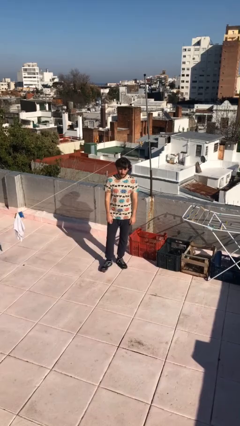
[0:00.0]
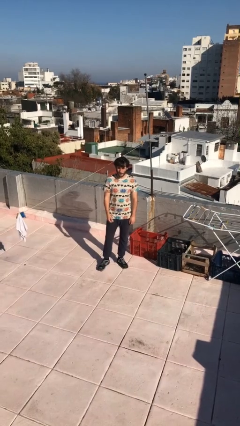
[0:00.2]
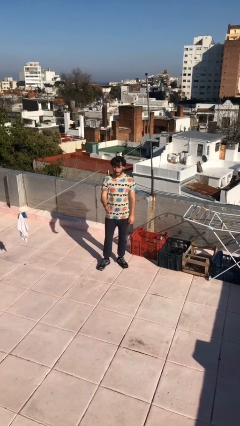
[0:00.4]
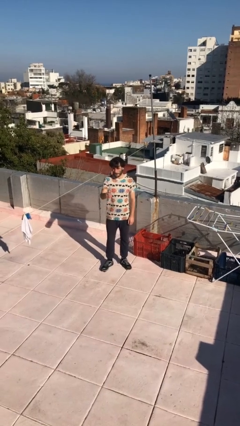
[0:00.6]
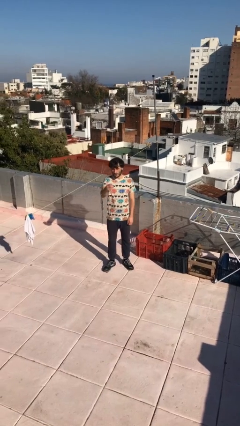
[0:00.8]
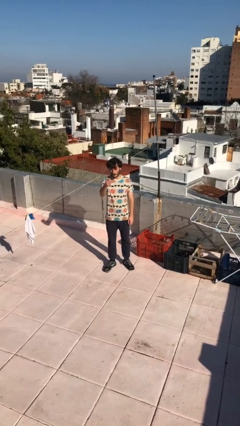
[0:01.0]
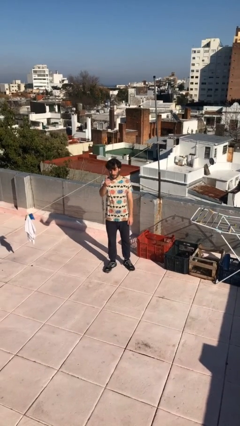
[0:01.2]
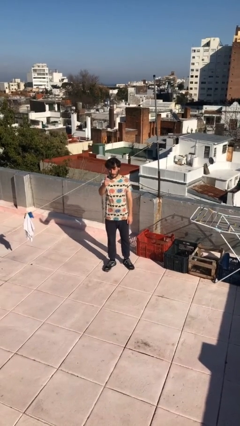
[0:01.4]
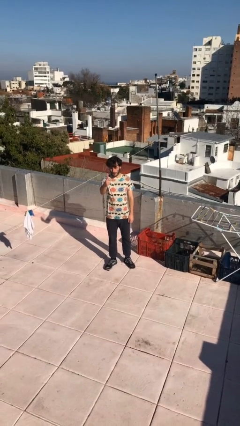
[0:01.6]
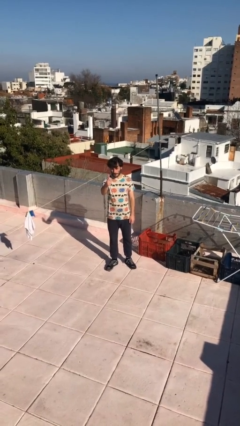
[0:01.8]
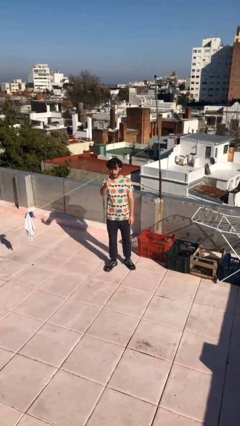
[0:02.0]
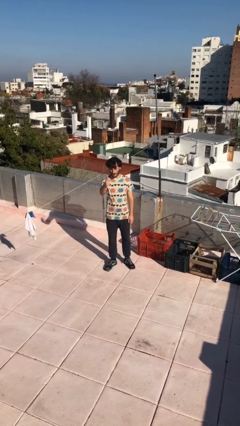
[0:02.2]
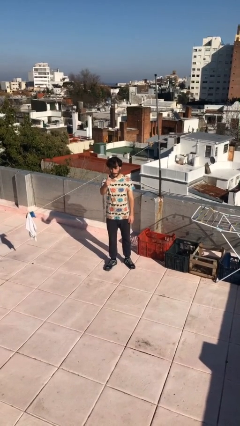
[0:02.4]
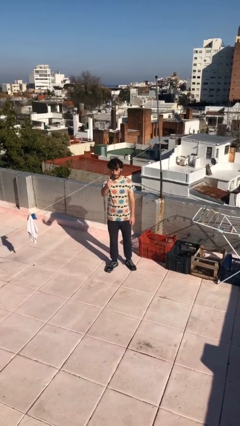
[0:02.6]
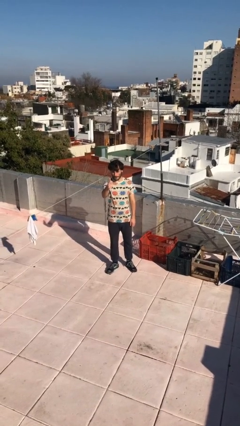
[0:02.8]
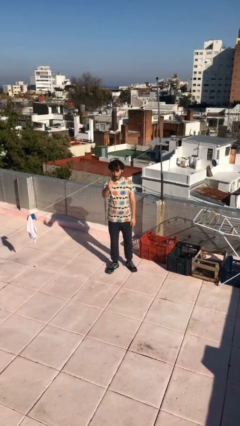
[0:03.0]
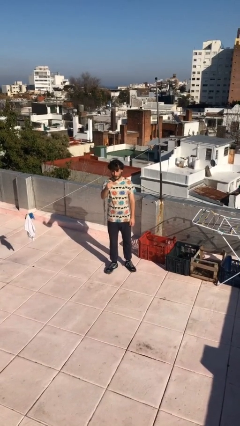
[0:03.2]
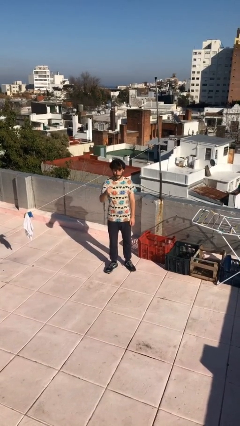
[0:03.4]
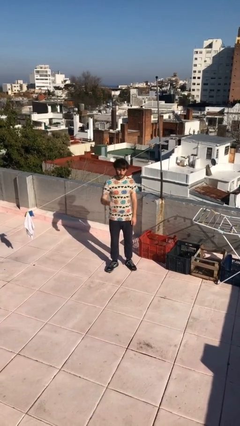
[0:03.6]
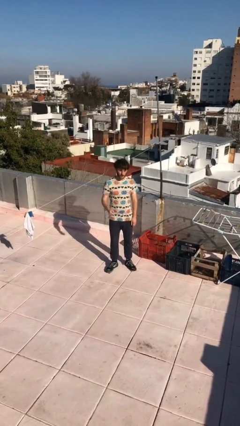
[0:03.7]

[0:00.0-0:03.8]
person gestures thumbs up

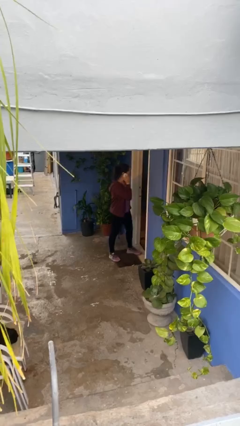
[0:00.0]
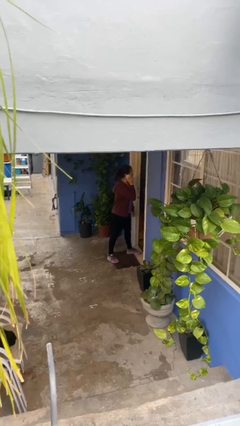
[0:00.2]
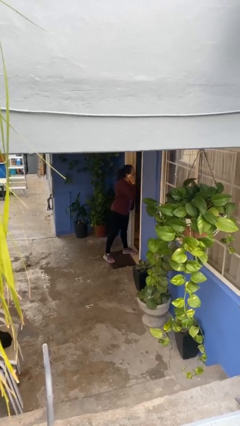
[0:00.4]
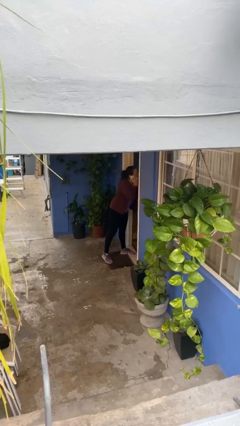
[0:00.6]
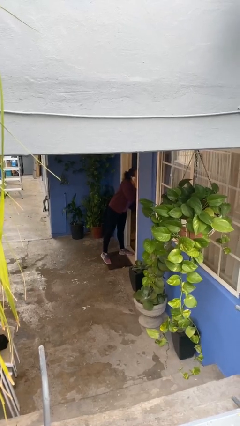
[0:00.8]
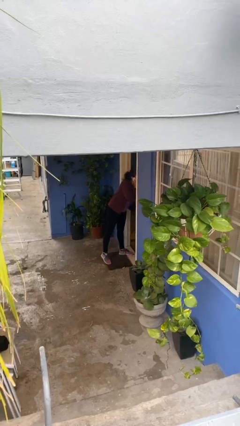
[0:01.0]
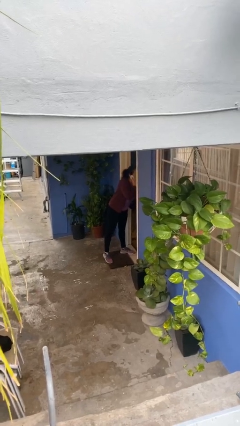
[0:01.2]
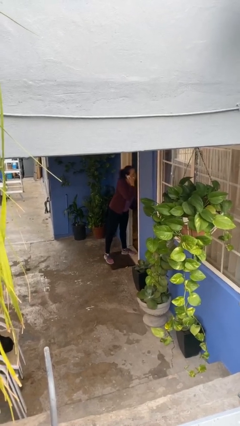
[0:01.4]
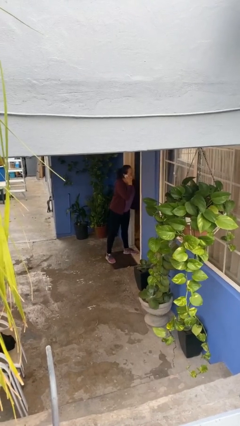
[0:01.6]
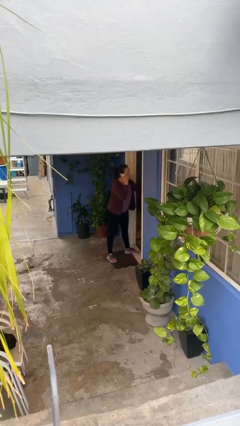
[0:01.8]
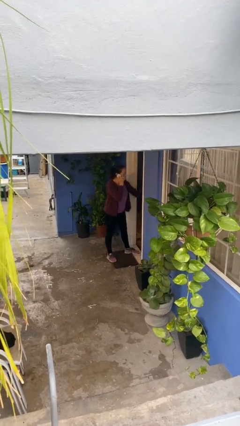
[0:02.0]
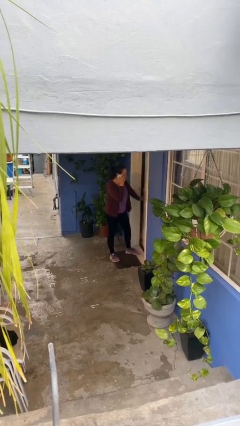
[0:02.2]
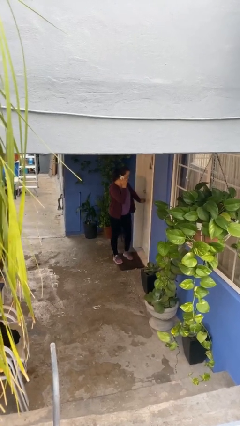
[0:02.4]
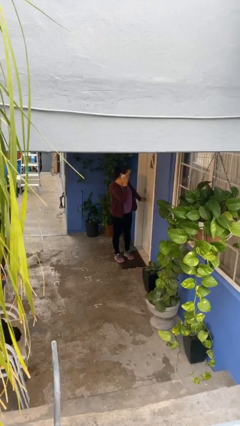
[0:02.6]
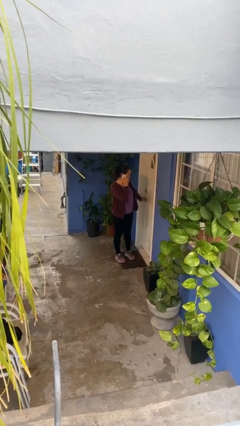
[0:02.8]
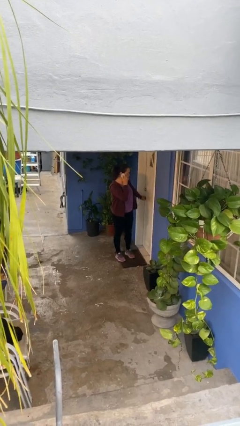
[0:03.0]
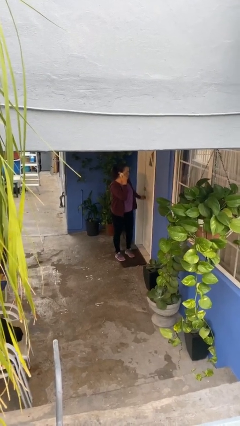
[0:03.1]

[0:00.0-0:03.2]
person closes facility door

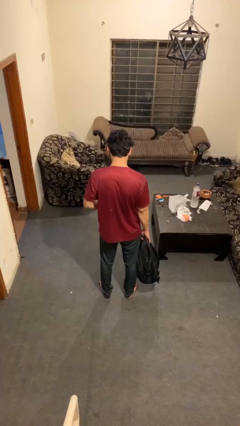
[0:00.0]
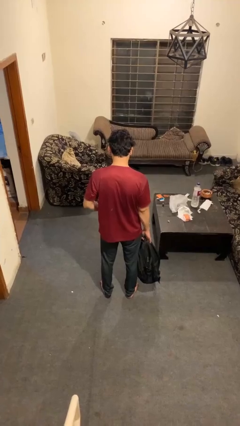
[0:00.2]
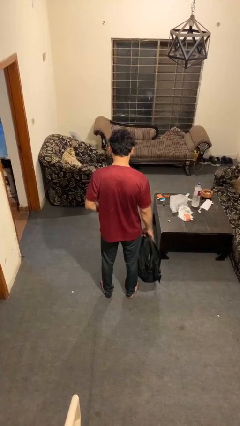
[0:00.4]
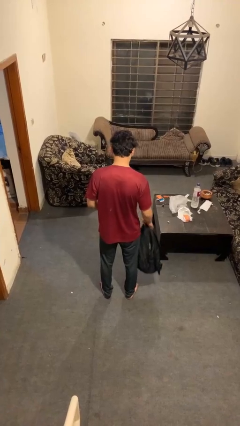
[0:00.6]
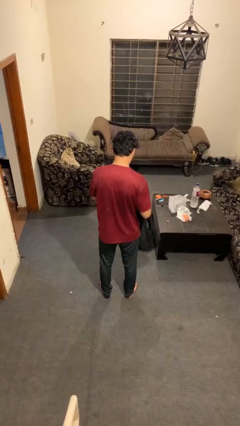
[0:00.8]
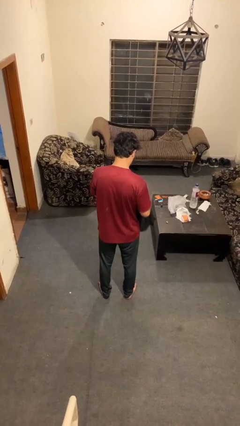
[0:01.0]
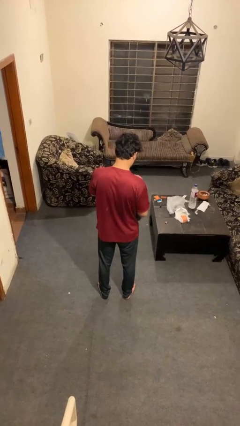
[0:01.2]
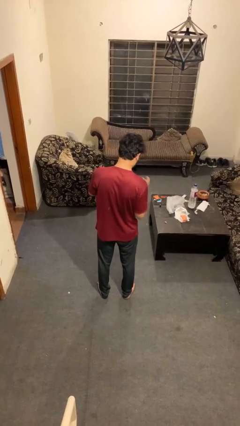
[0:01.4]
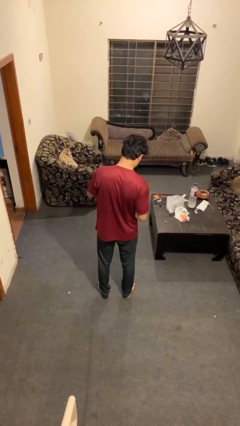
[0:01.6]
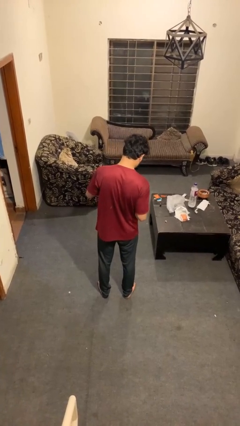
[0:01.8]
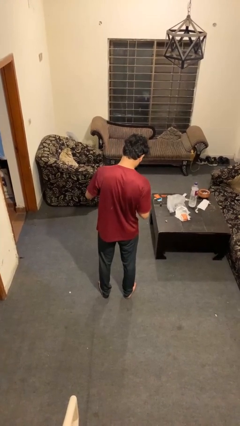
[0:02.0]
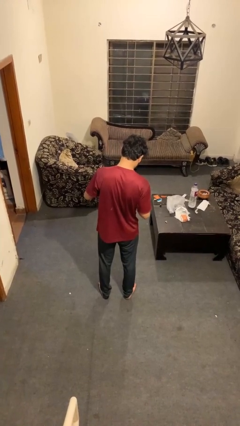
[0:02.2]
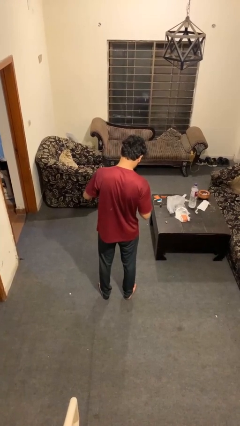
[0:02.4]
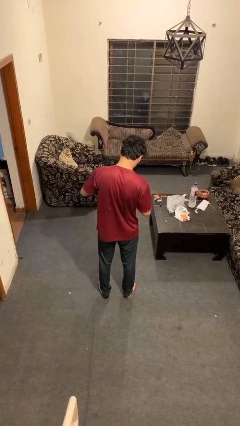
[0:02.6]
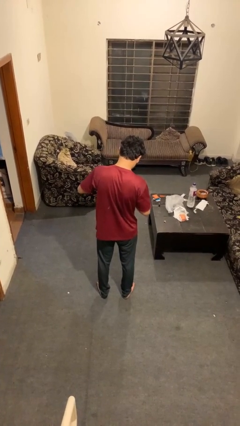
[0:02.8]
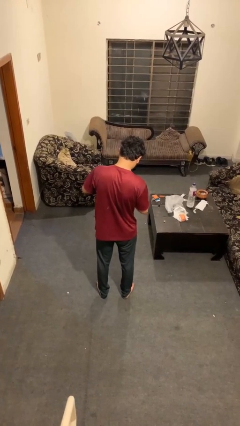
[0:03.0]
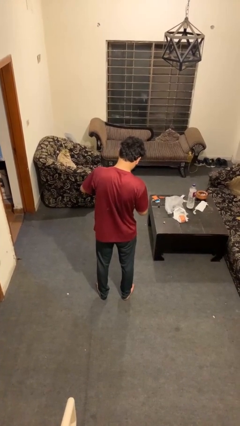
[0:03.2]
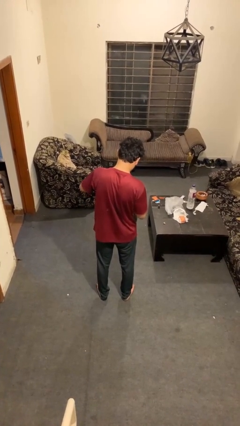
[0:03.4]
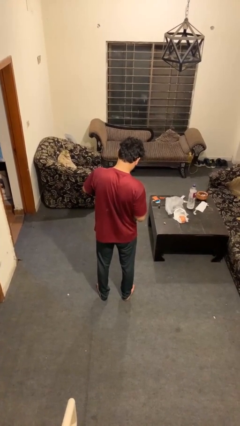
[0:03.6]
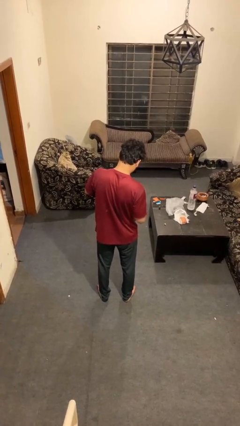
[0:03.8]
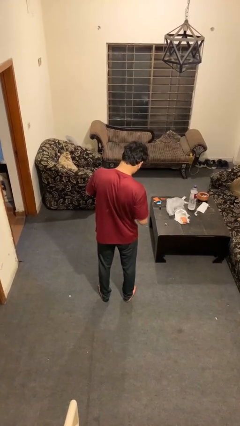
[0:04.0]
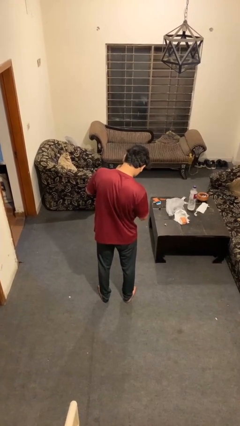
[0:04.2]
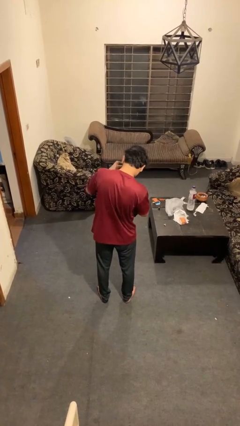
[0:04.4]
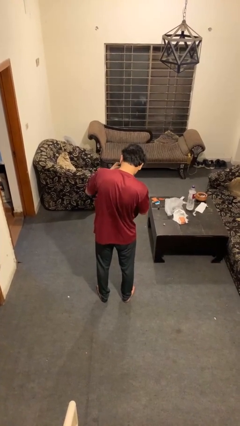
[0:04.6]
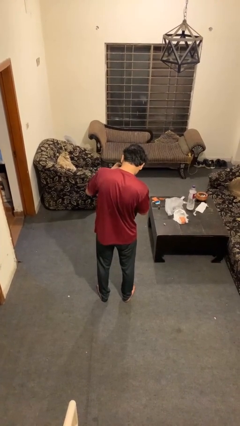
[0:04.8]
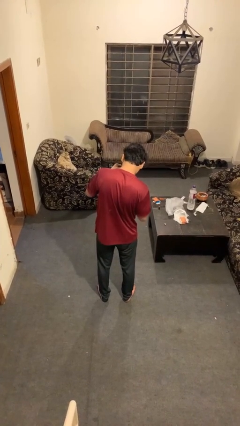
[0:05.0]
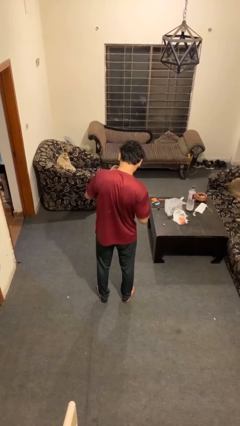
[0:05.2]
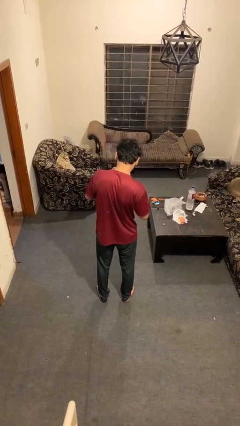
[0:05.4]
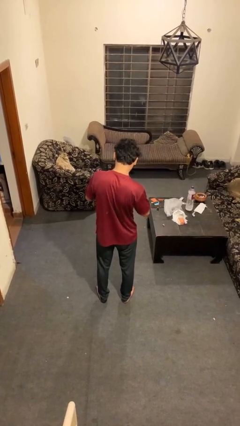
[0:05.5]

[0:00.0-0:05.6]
person searches in bag

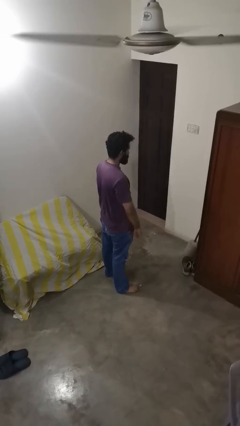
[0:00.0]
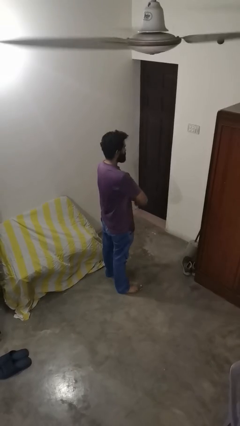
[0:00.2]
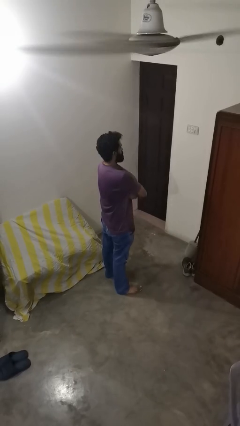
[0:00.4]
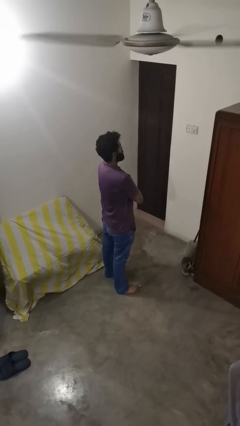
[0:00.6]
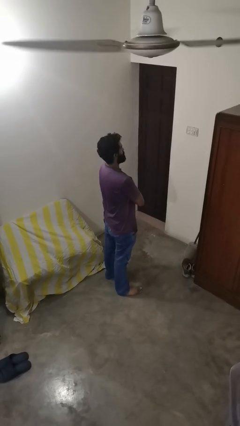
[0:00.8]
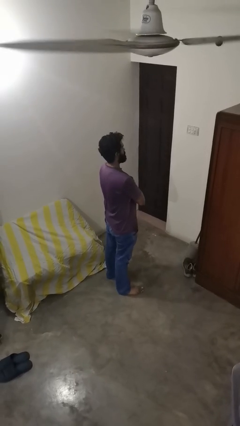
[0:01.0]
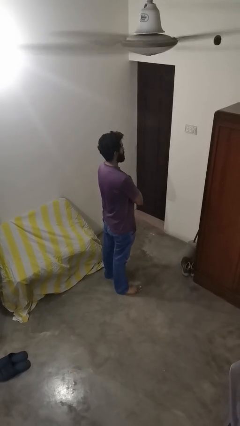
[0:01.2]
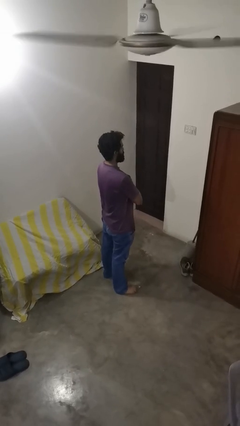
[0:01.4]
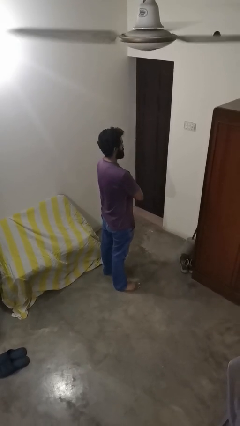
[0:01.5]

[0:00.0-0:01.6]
person crosses arms

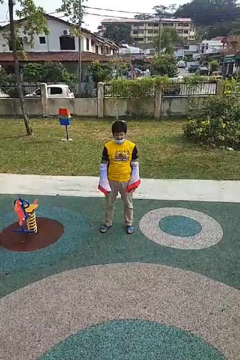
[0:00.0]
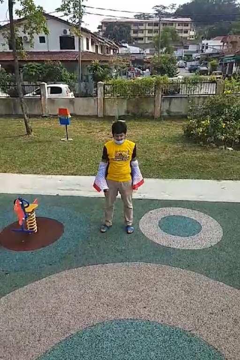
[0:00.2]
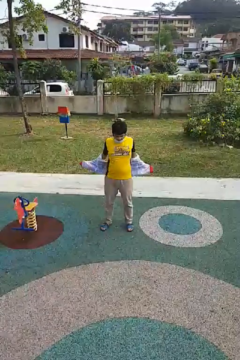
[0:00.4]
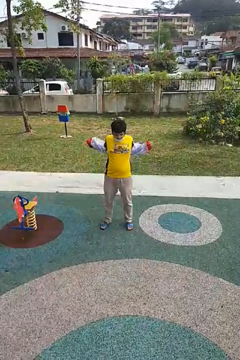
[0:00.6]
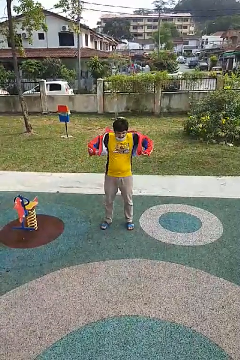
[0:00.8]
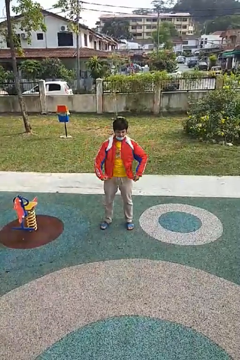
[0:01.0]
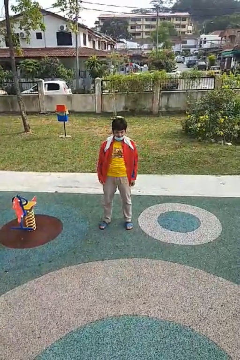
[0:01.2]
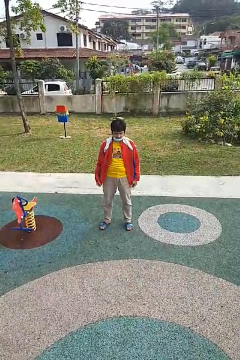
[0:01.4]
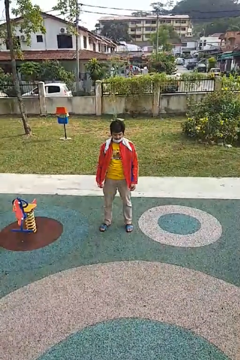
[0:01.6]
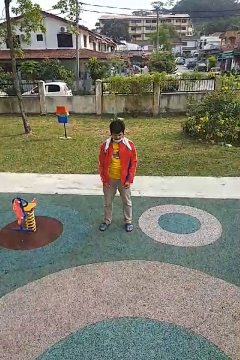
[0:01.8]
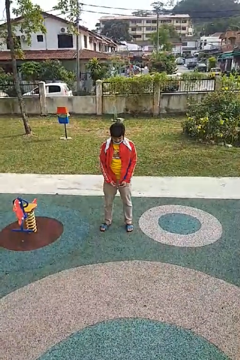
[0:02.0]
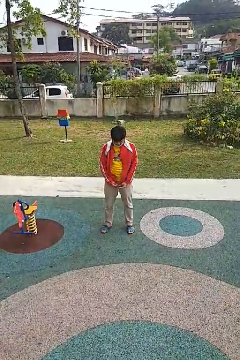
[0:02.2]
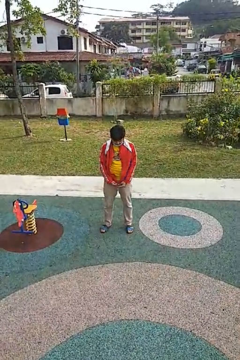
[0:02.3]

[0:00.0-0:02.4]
person puts on jacket

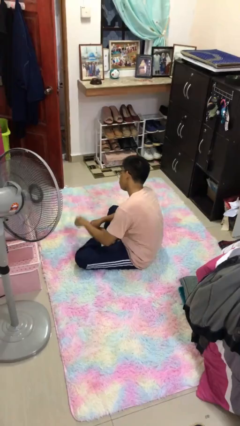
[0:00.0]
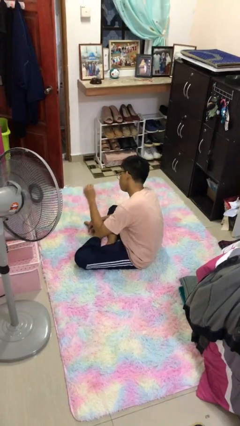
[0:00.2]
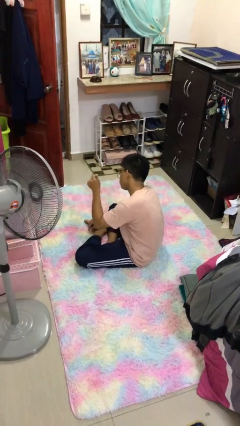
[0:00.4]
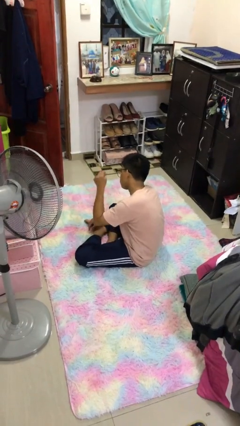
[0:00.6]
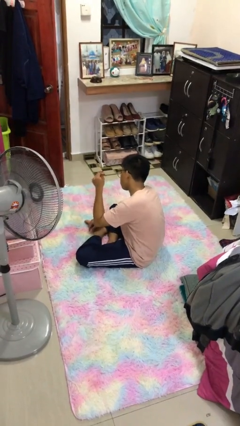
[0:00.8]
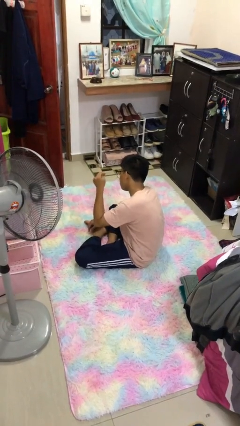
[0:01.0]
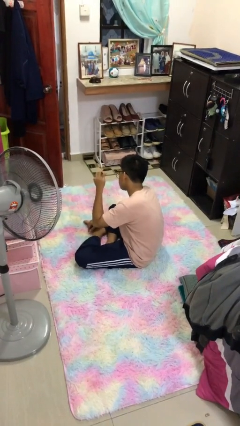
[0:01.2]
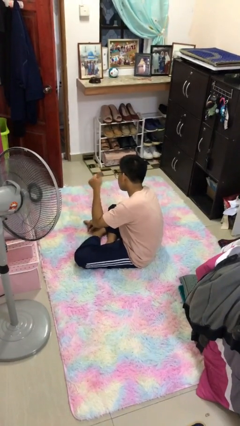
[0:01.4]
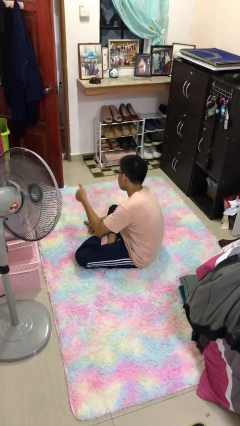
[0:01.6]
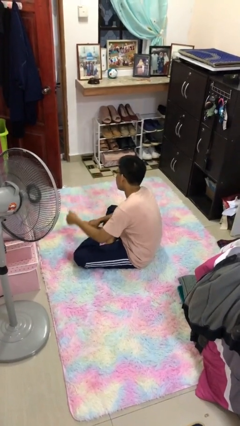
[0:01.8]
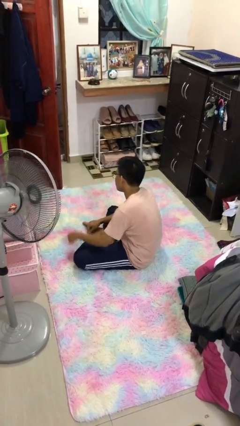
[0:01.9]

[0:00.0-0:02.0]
person snaps fingers
